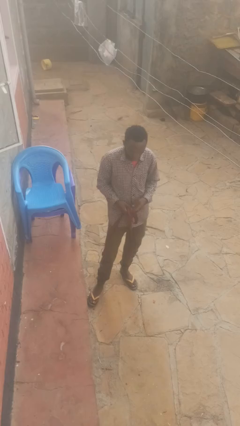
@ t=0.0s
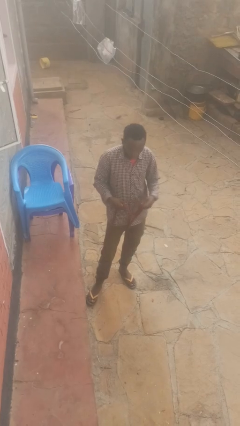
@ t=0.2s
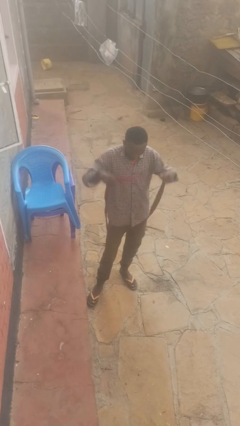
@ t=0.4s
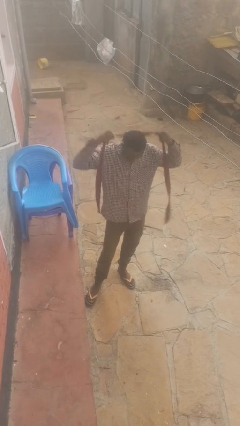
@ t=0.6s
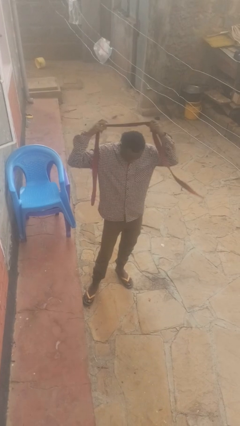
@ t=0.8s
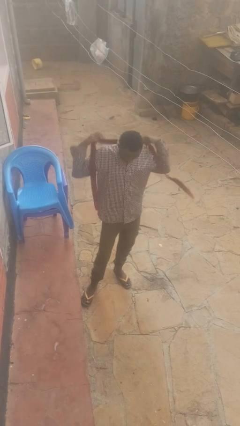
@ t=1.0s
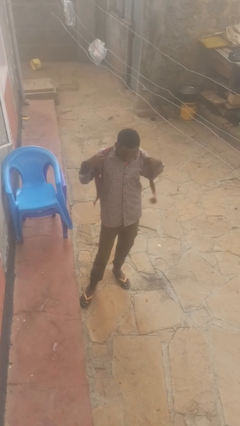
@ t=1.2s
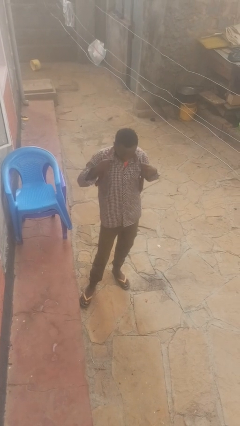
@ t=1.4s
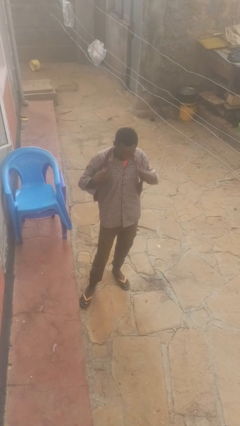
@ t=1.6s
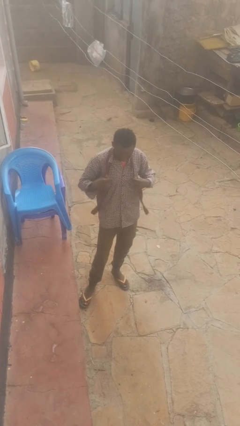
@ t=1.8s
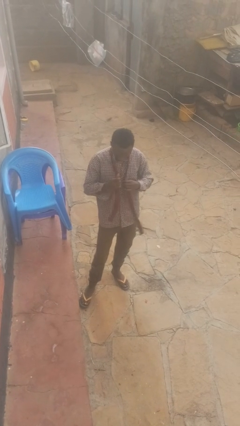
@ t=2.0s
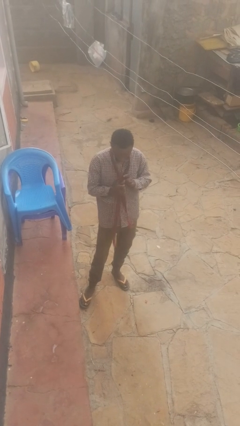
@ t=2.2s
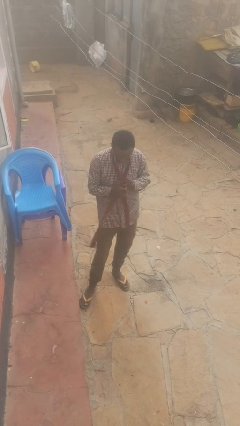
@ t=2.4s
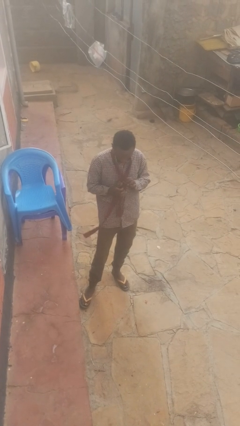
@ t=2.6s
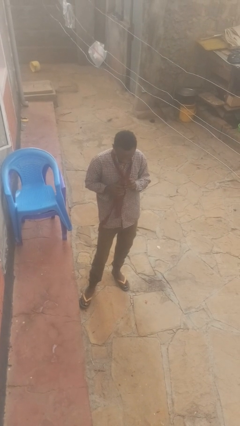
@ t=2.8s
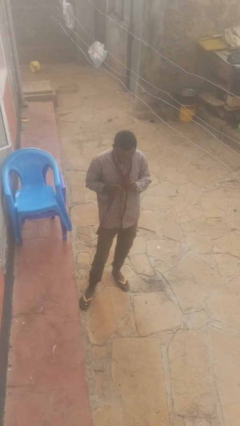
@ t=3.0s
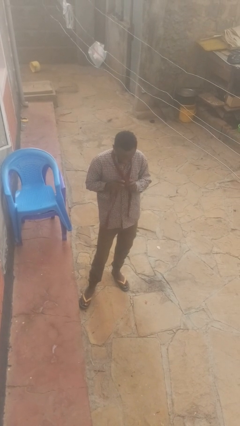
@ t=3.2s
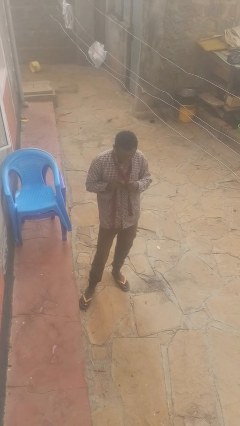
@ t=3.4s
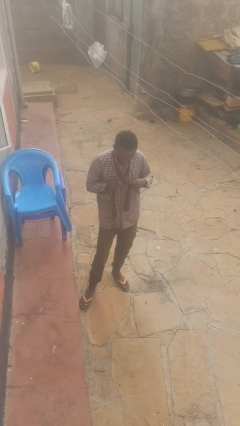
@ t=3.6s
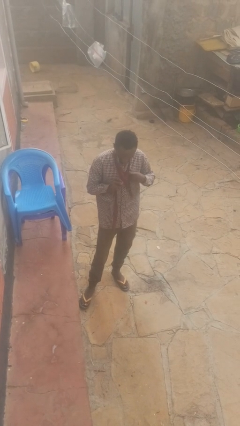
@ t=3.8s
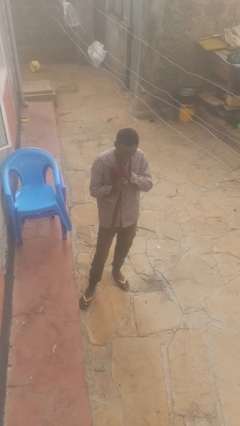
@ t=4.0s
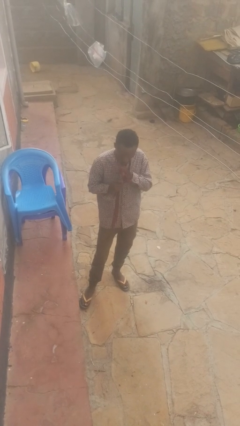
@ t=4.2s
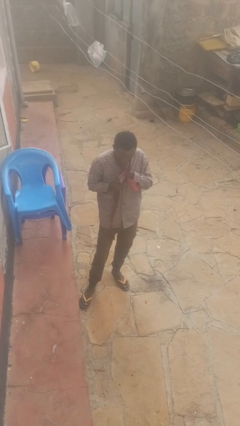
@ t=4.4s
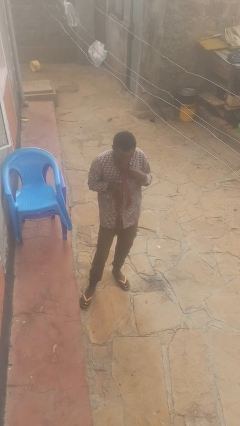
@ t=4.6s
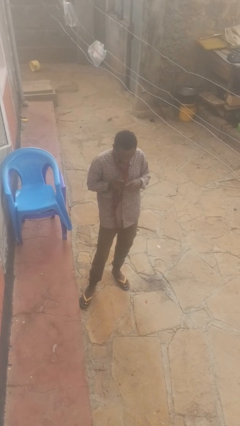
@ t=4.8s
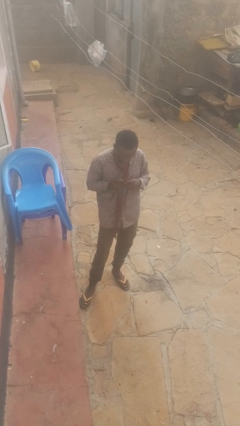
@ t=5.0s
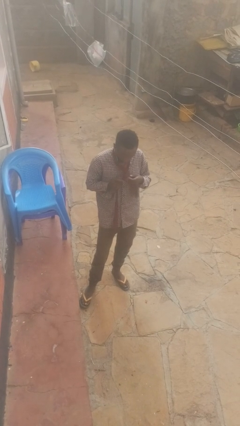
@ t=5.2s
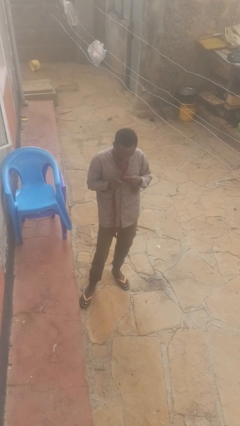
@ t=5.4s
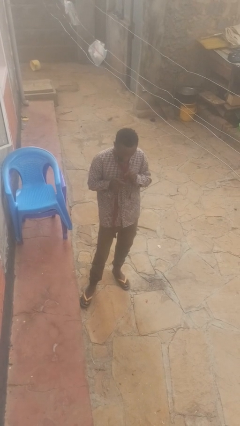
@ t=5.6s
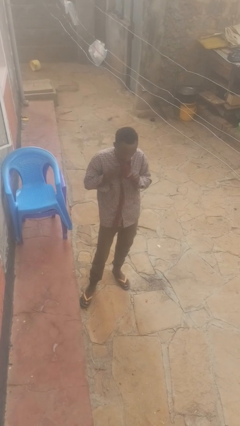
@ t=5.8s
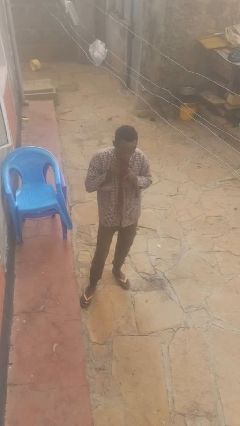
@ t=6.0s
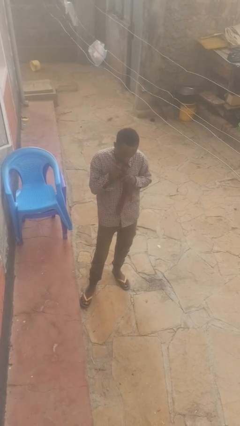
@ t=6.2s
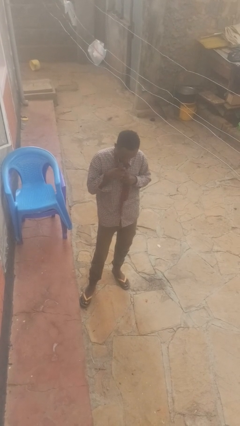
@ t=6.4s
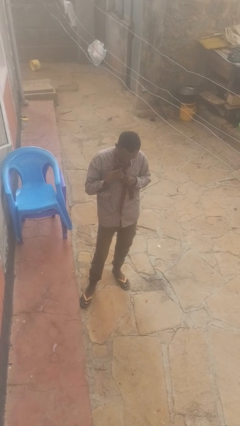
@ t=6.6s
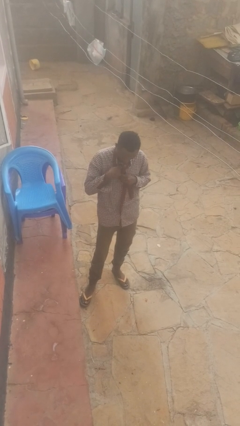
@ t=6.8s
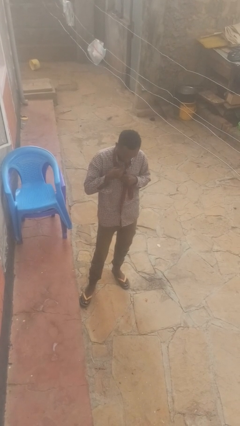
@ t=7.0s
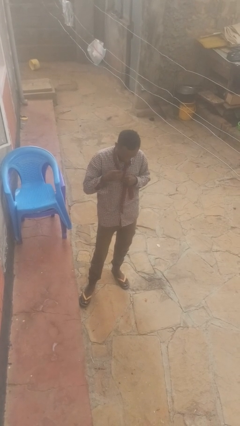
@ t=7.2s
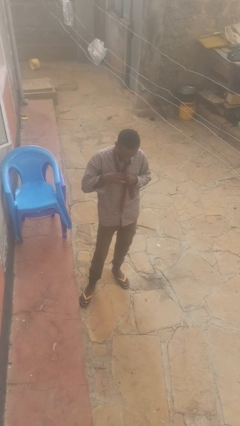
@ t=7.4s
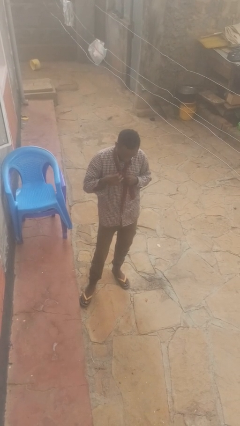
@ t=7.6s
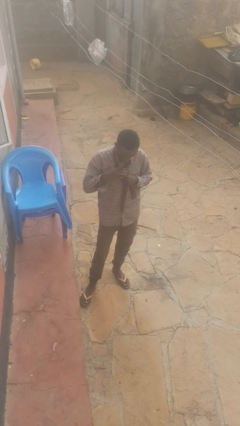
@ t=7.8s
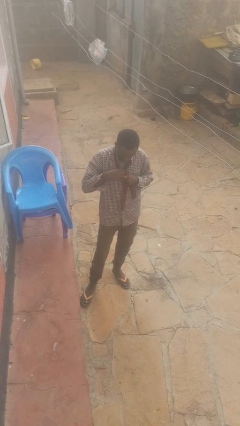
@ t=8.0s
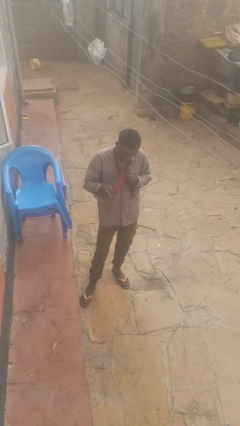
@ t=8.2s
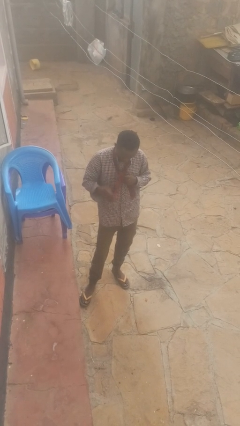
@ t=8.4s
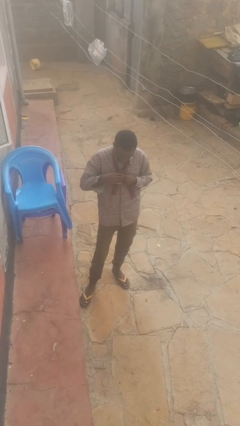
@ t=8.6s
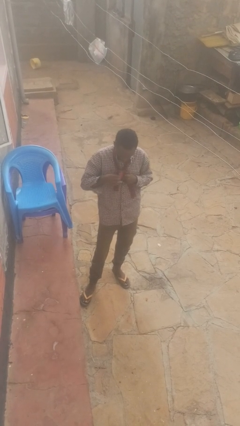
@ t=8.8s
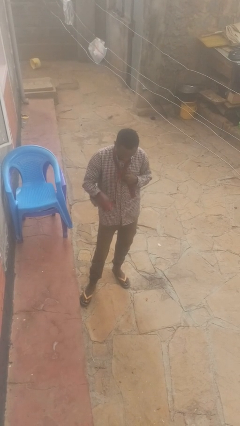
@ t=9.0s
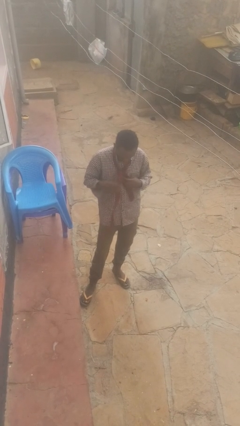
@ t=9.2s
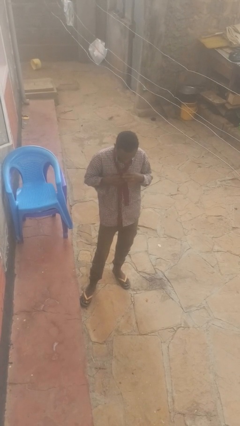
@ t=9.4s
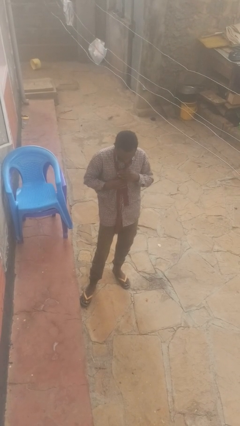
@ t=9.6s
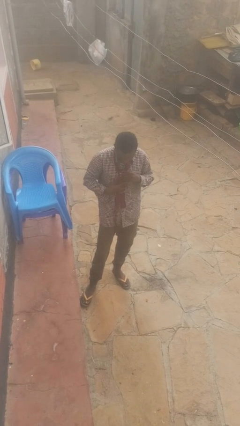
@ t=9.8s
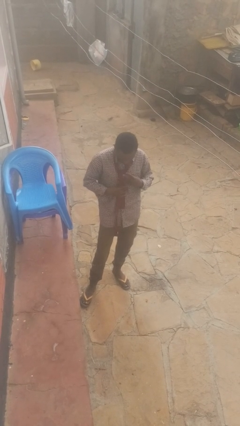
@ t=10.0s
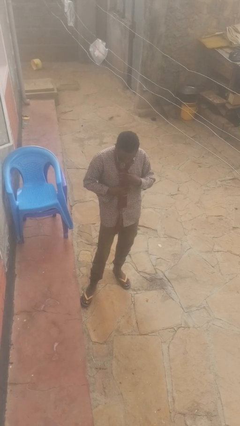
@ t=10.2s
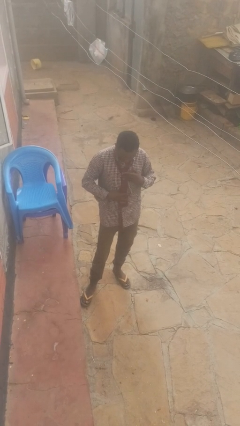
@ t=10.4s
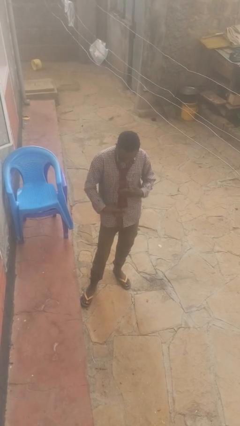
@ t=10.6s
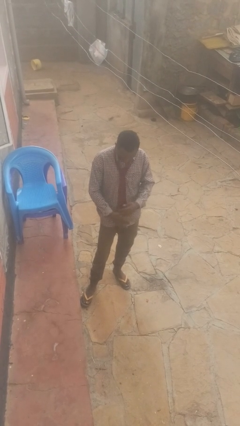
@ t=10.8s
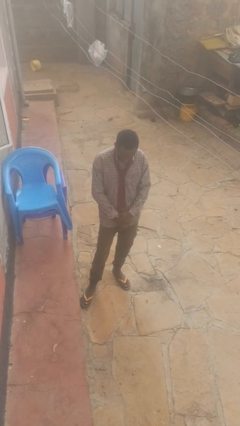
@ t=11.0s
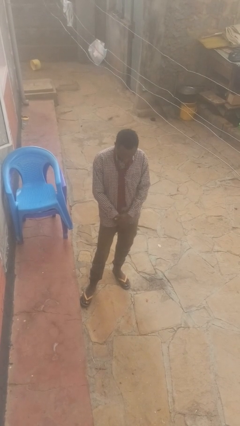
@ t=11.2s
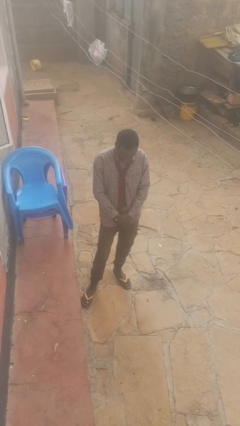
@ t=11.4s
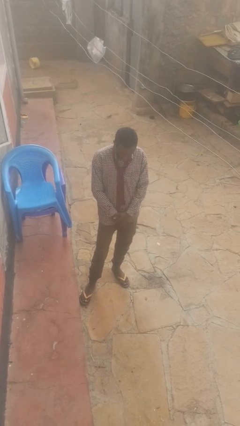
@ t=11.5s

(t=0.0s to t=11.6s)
person puts on necktie

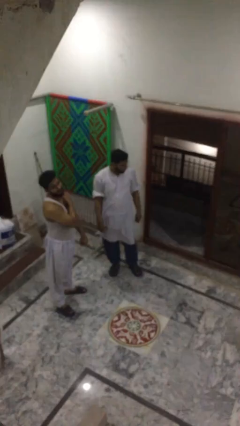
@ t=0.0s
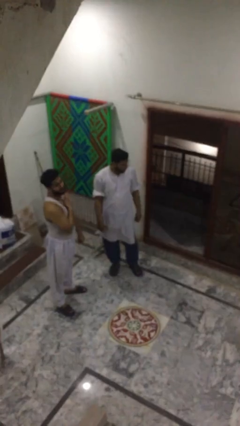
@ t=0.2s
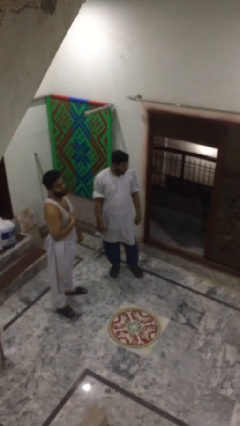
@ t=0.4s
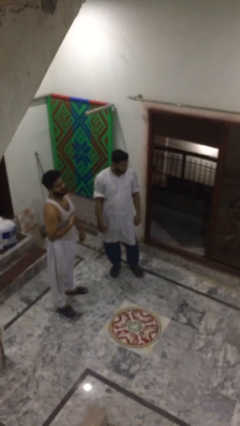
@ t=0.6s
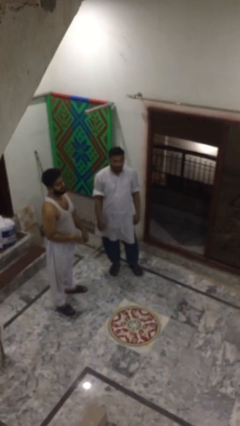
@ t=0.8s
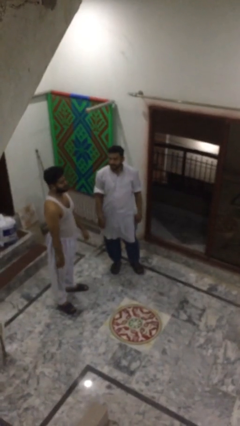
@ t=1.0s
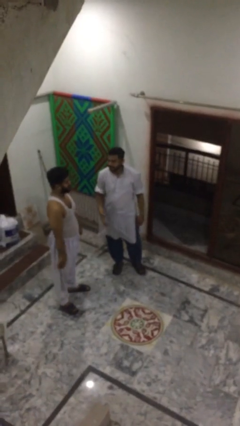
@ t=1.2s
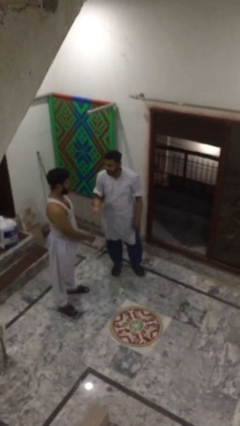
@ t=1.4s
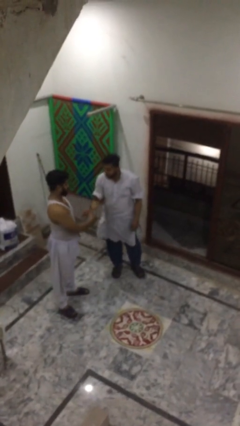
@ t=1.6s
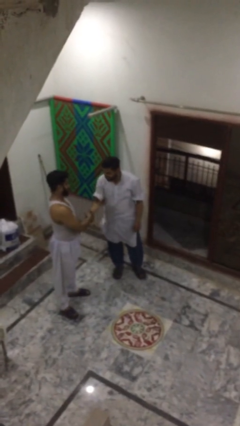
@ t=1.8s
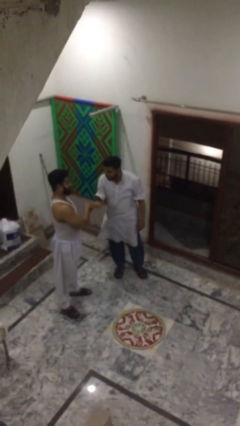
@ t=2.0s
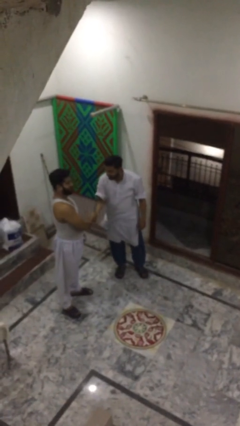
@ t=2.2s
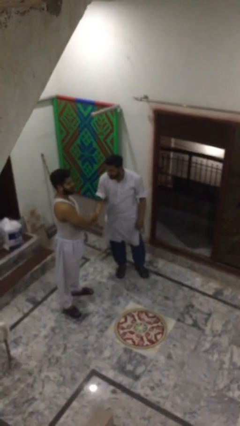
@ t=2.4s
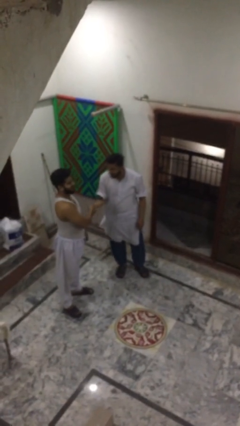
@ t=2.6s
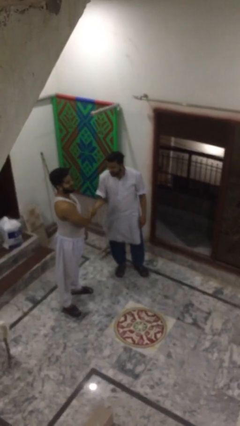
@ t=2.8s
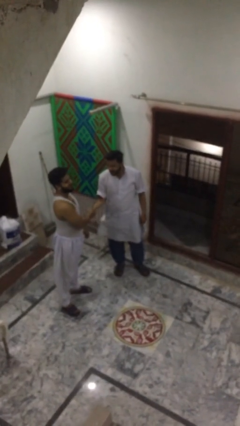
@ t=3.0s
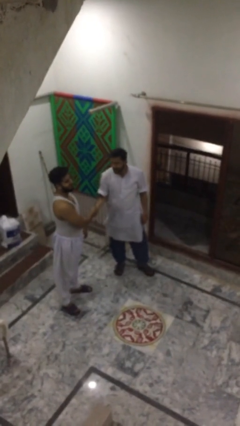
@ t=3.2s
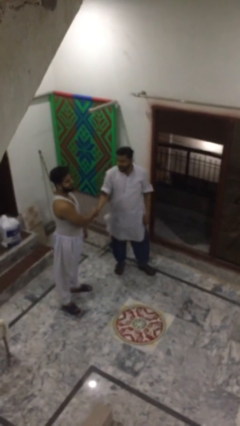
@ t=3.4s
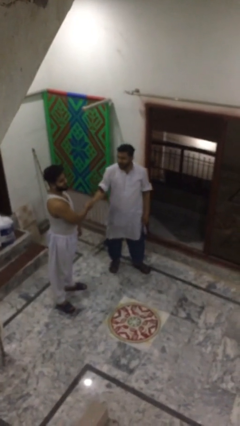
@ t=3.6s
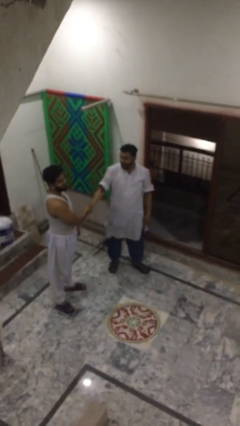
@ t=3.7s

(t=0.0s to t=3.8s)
person shakes hand

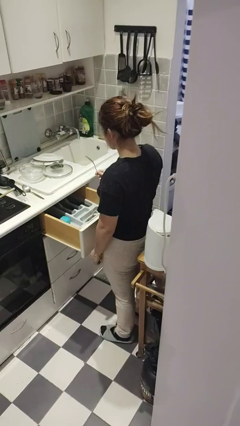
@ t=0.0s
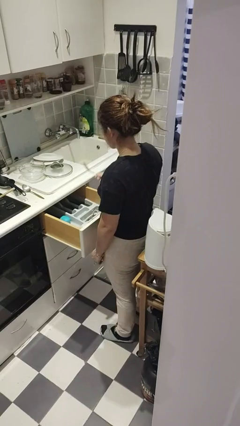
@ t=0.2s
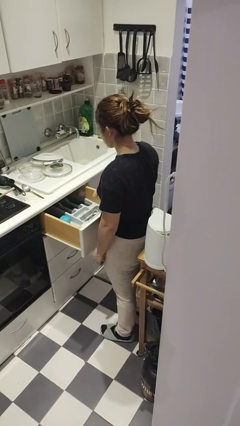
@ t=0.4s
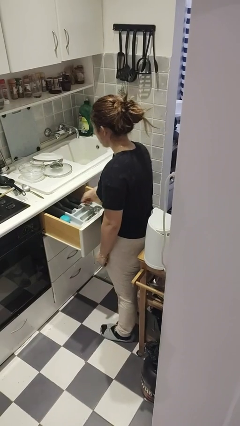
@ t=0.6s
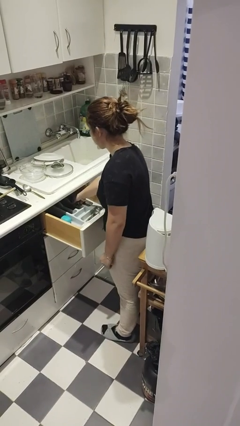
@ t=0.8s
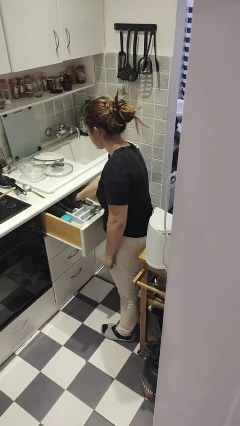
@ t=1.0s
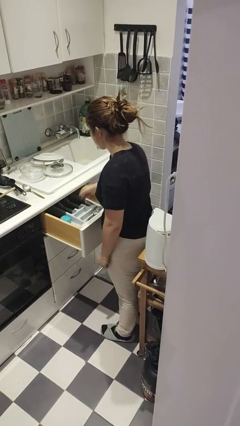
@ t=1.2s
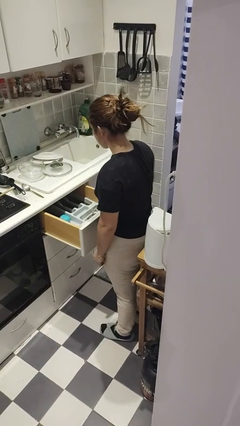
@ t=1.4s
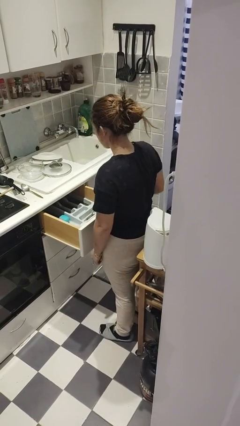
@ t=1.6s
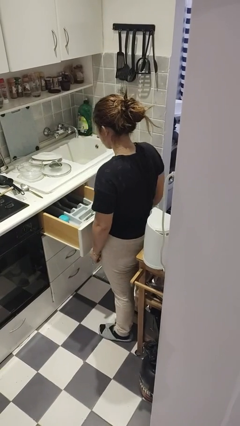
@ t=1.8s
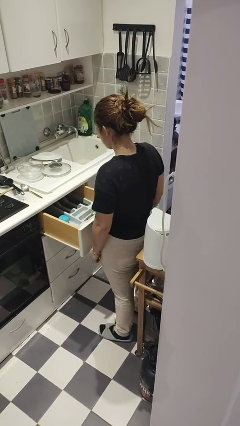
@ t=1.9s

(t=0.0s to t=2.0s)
person puts object into kitchen drawer

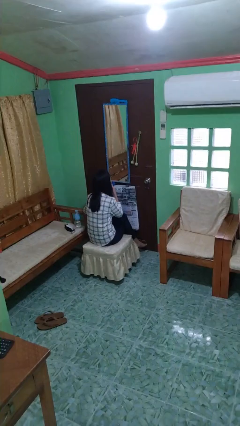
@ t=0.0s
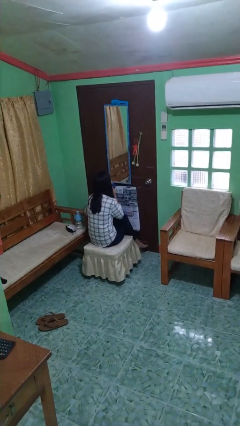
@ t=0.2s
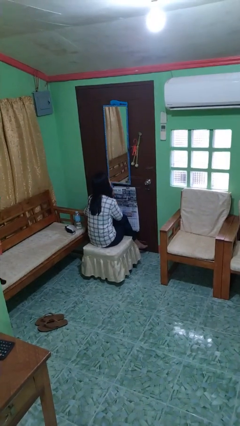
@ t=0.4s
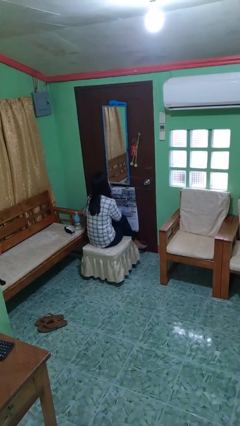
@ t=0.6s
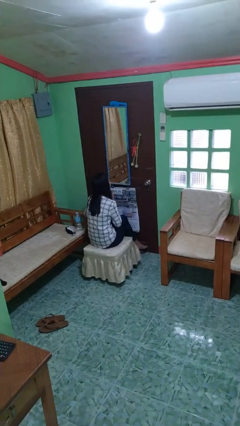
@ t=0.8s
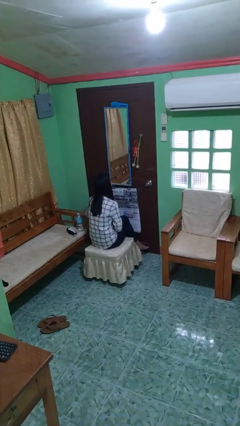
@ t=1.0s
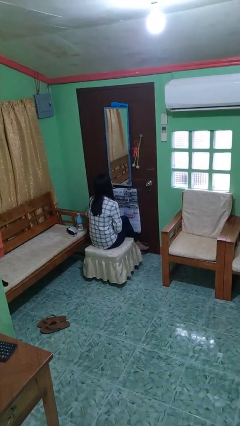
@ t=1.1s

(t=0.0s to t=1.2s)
person wipes mouth with napkin
